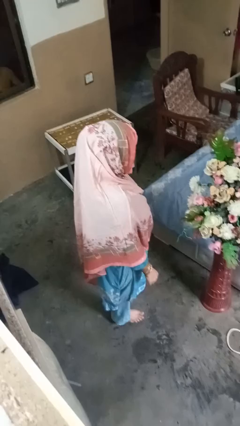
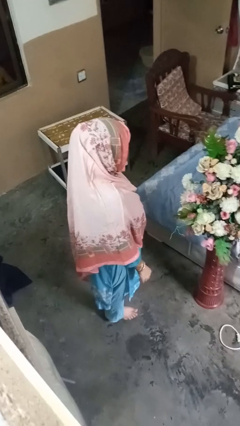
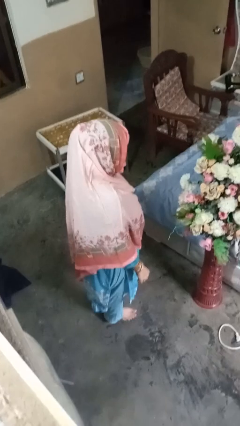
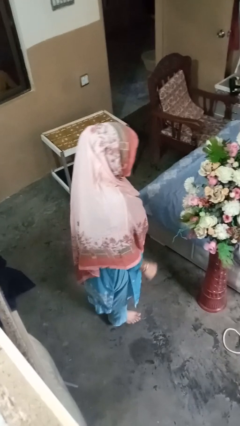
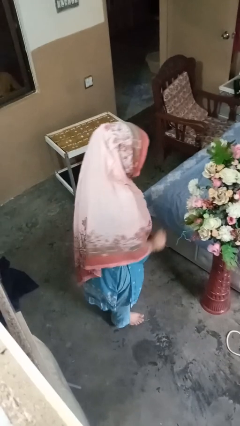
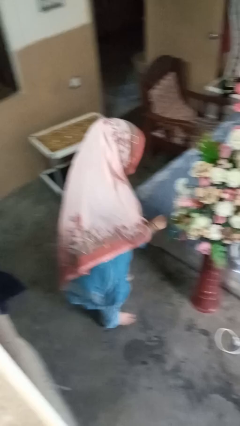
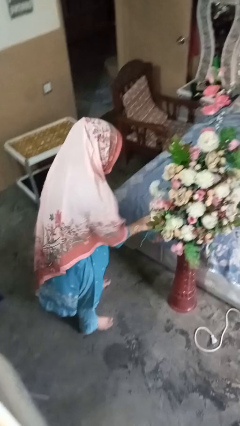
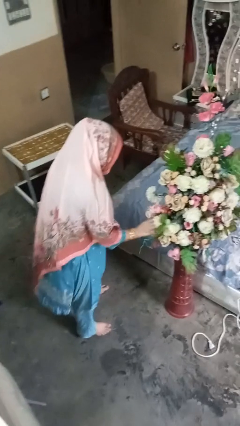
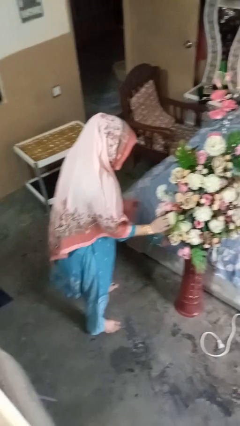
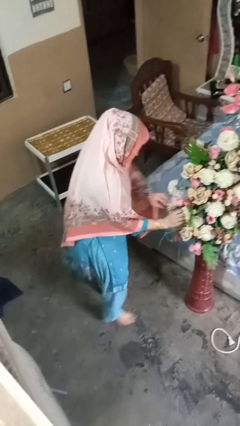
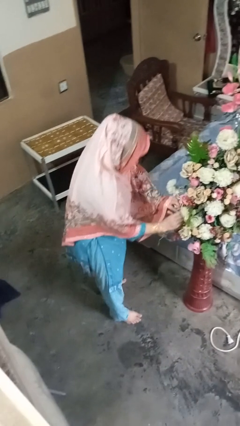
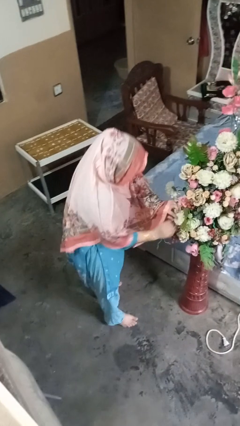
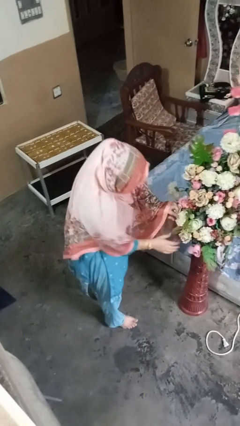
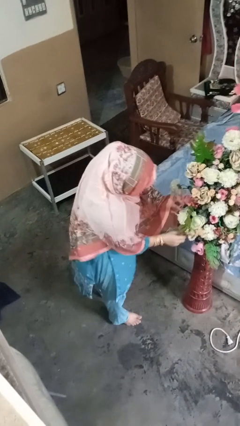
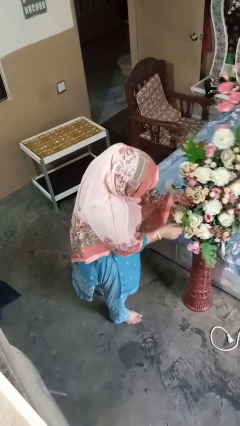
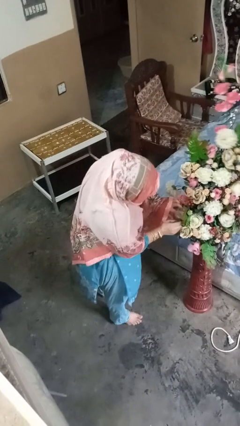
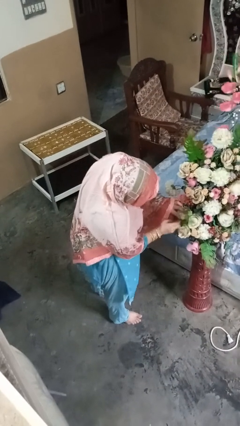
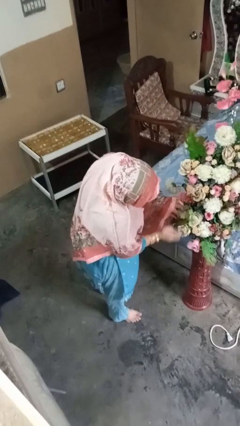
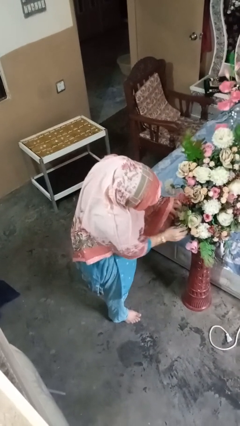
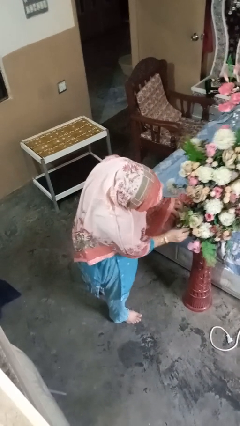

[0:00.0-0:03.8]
person arranges flowers in vase

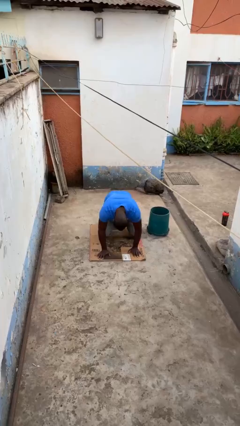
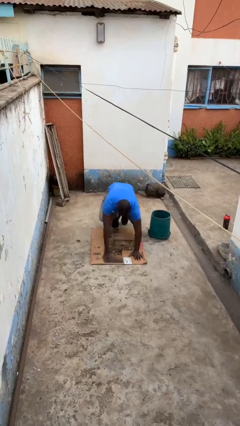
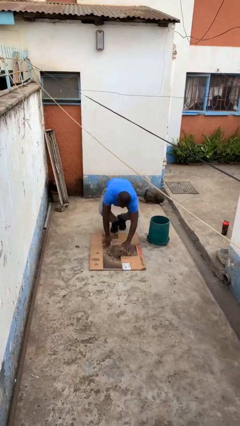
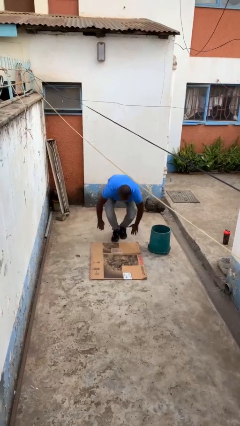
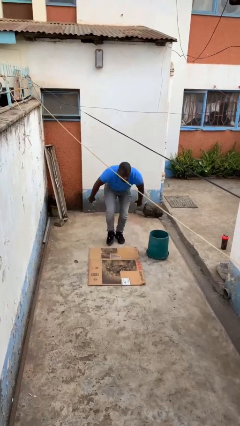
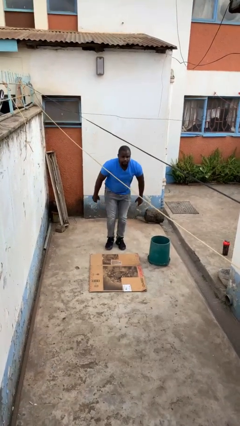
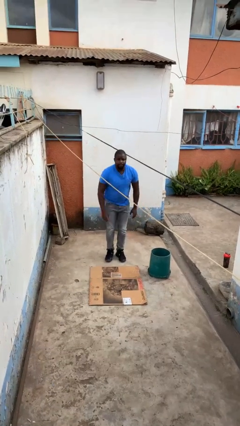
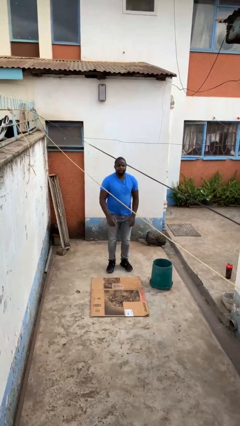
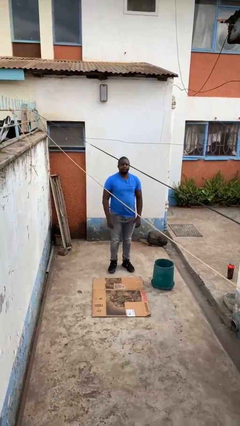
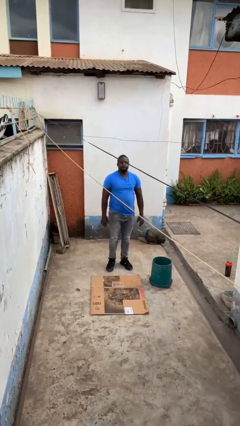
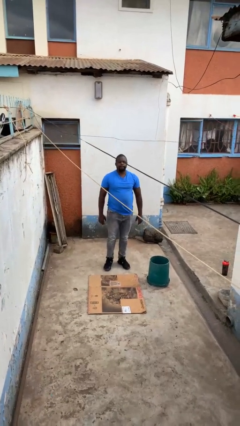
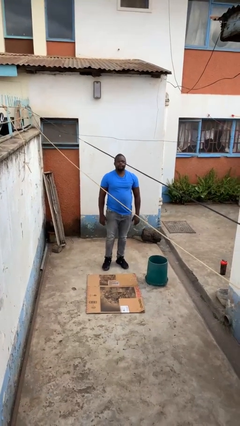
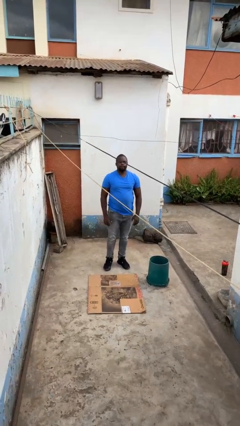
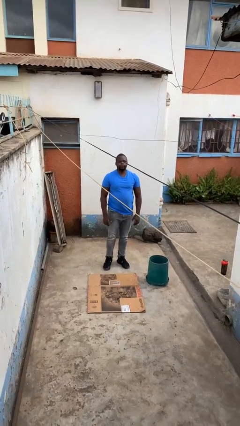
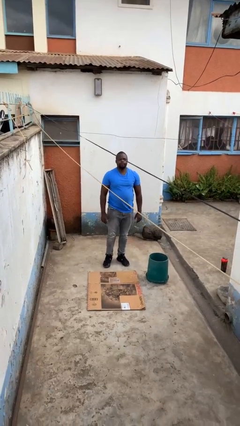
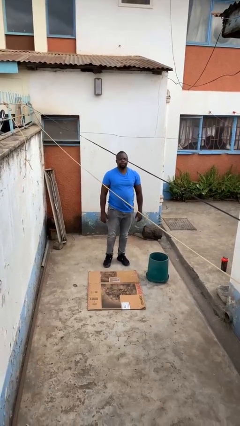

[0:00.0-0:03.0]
person stands up from floor

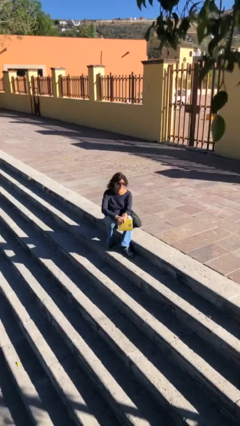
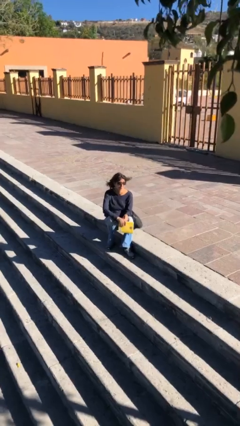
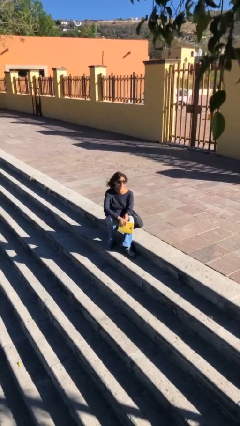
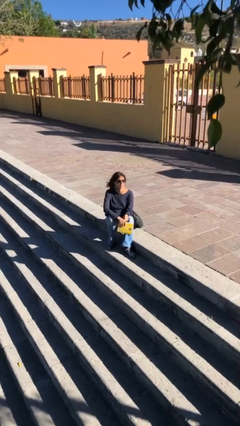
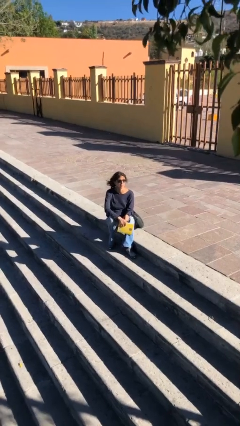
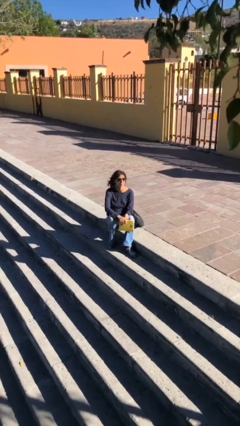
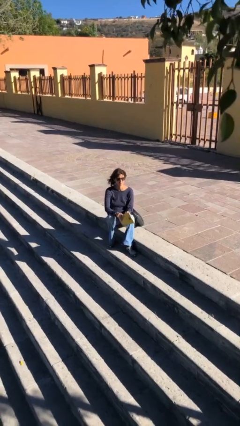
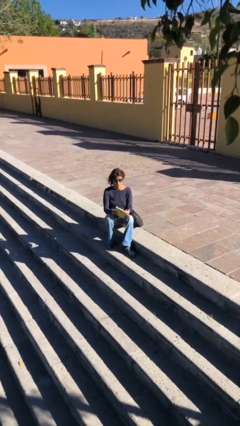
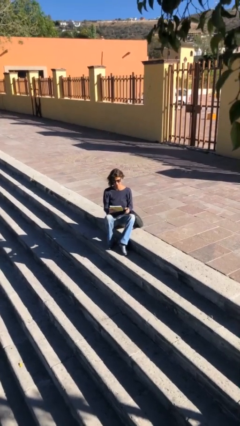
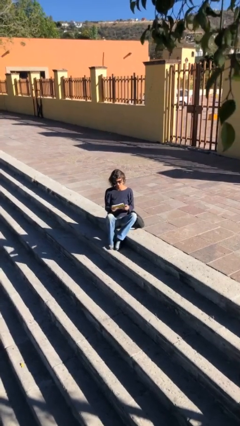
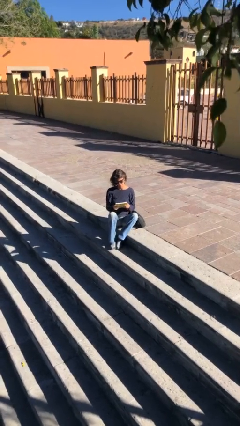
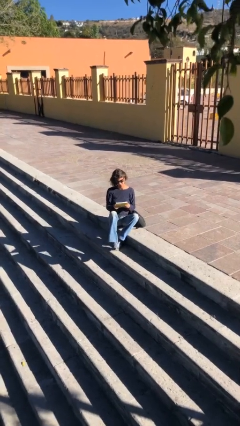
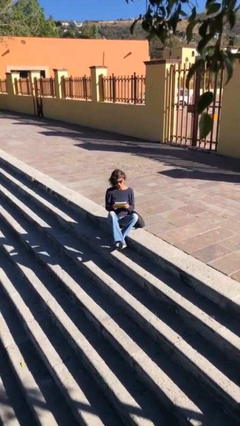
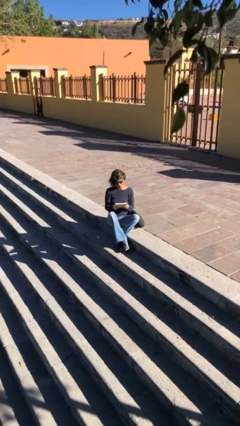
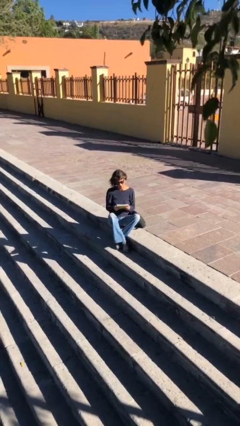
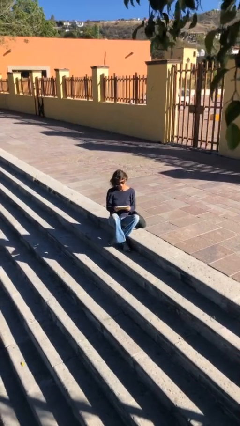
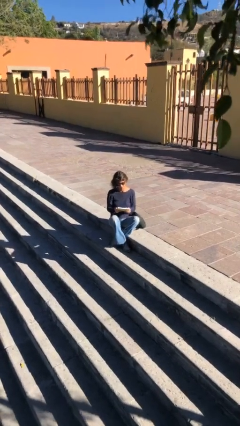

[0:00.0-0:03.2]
person reads document

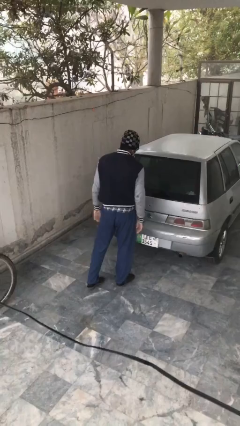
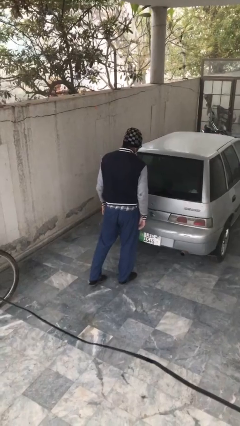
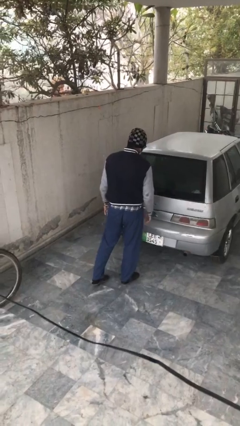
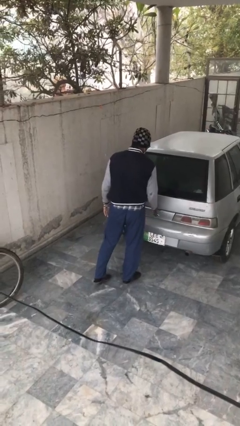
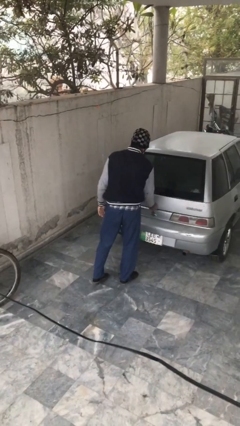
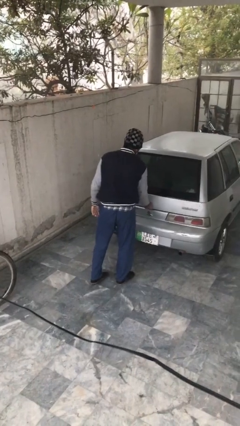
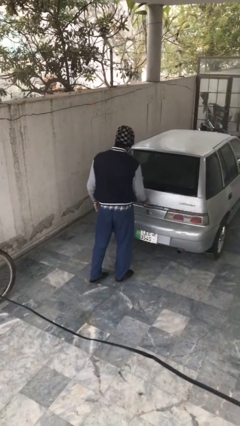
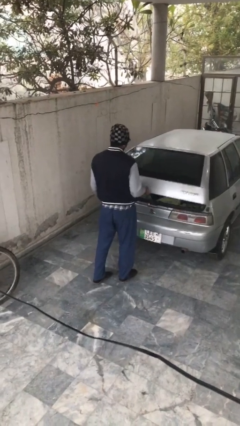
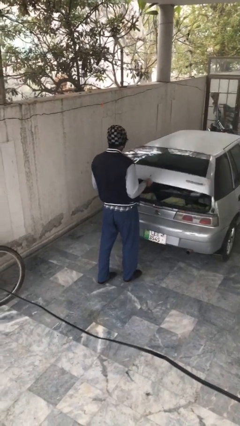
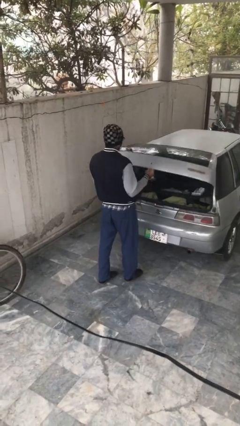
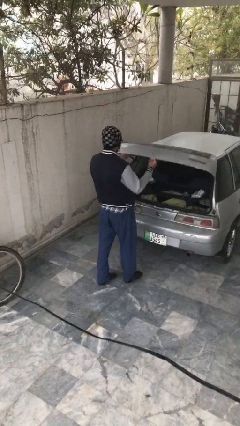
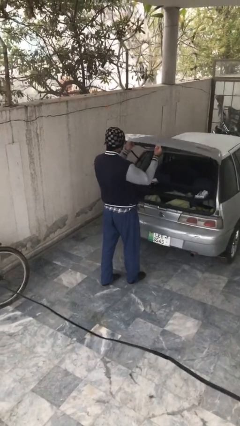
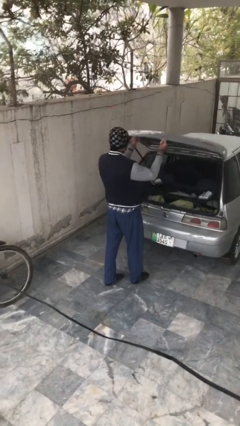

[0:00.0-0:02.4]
person opens car trunk

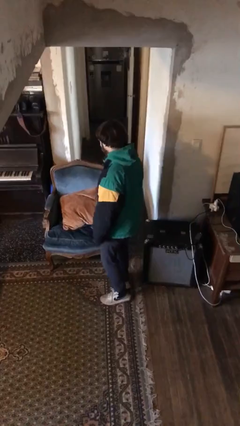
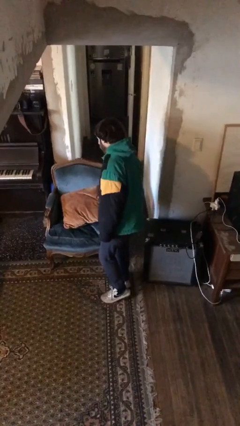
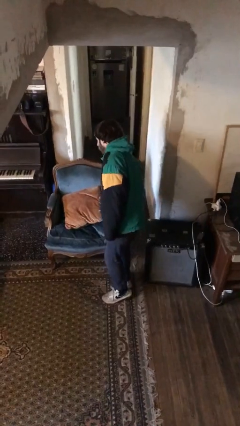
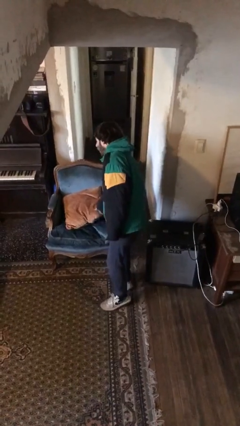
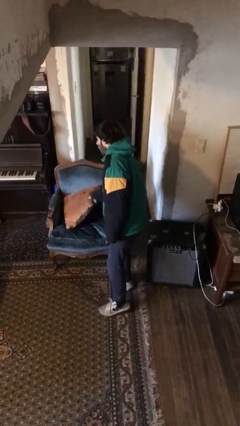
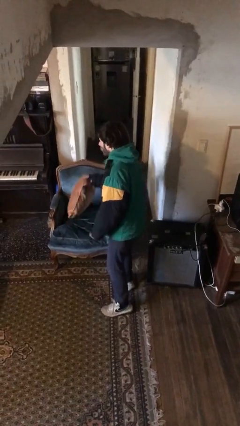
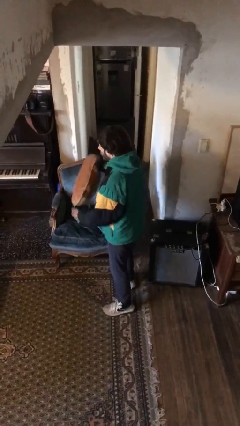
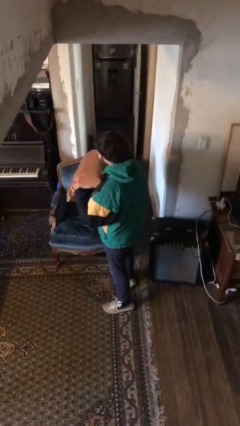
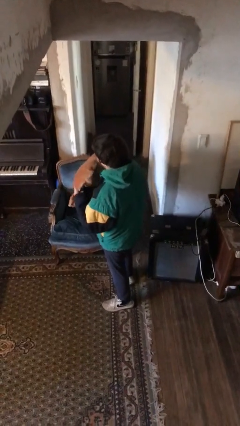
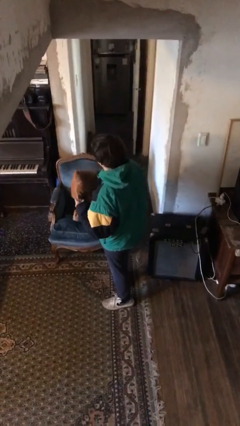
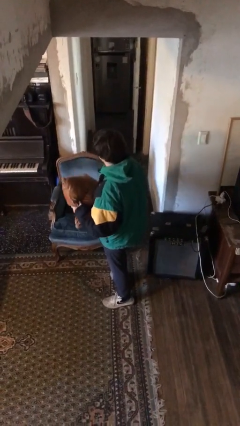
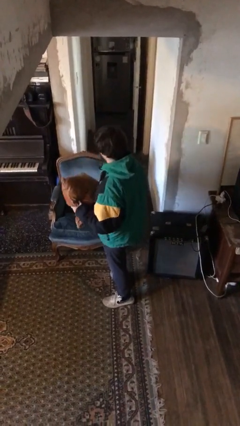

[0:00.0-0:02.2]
person picks up object from couch

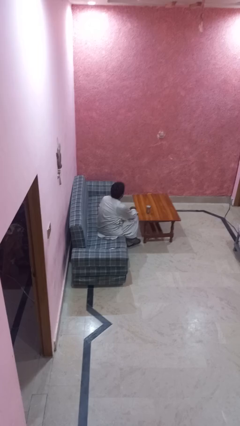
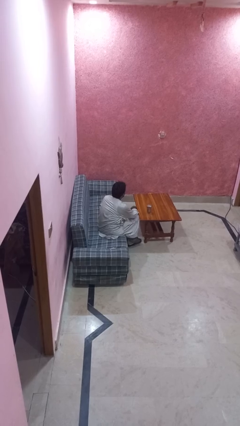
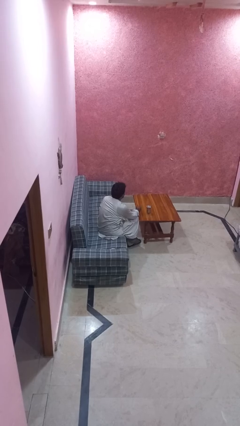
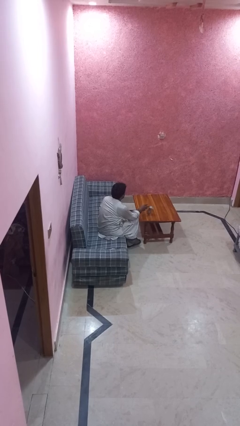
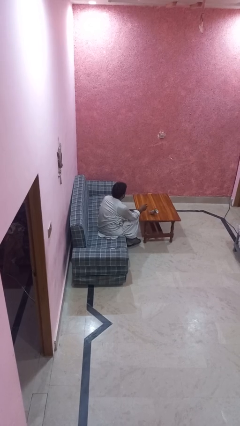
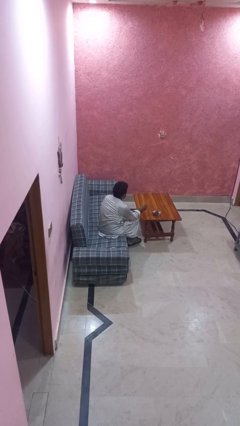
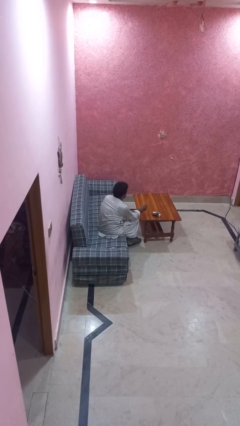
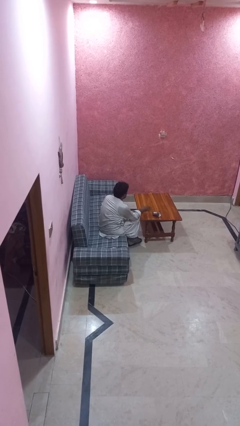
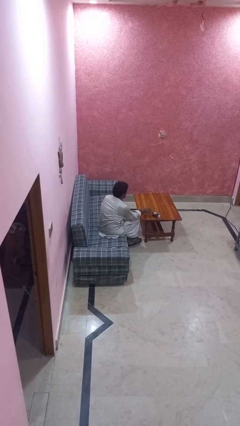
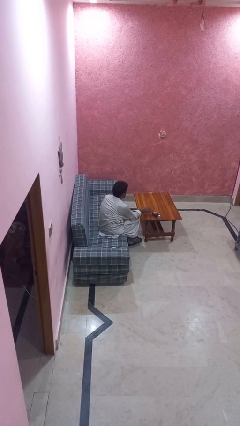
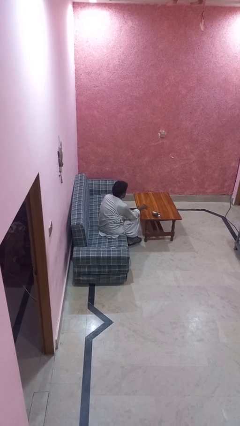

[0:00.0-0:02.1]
person knocks over glass

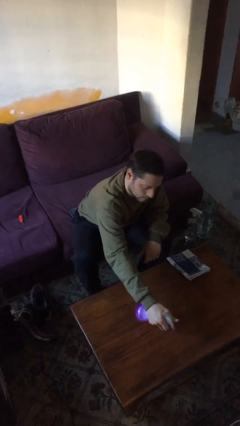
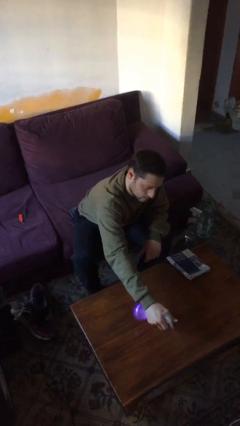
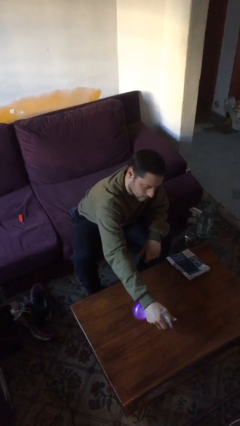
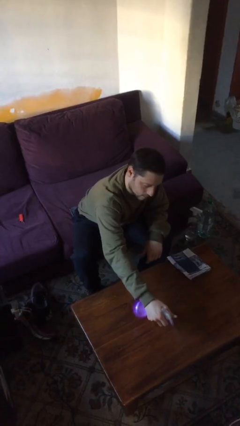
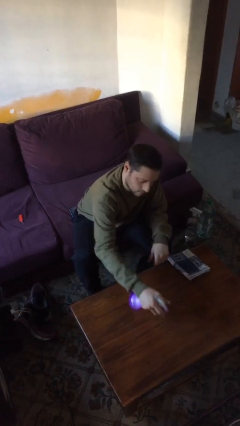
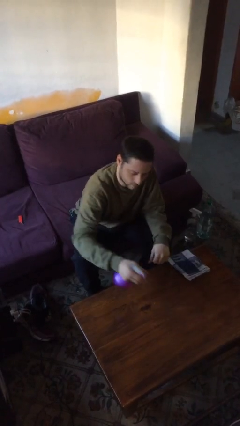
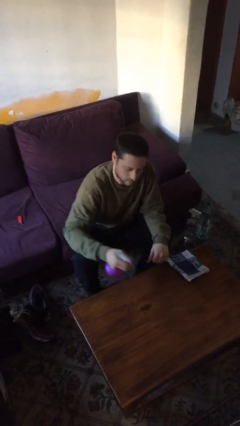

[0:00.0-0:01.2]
person sprays from bottle
